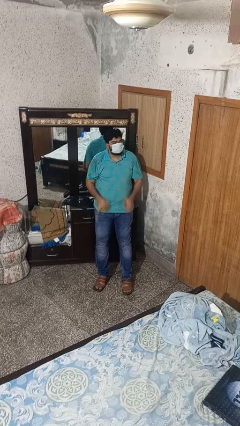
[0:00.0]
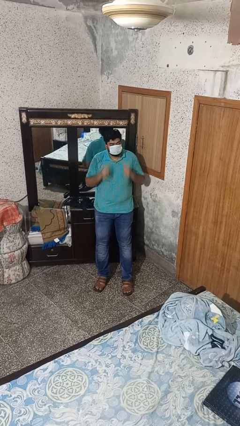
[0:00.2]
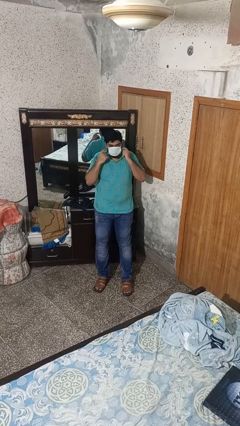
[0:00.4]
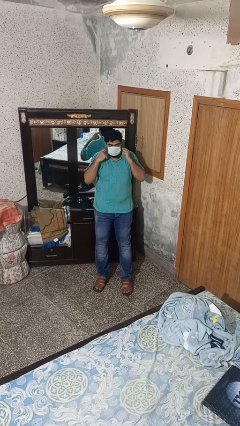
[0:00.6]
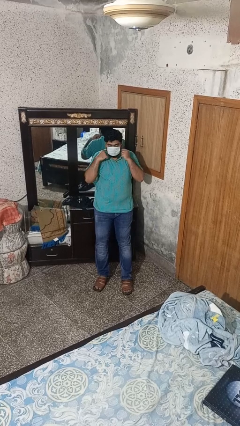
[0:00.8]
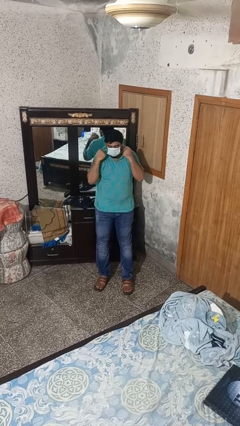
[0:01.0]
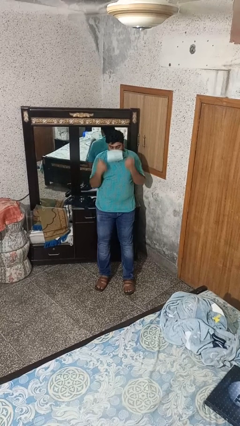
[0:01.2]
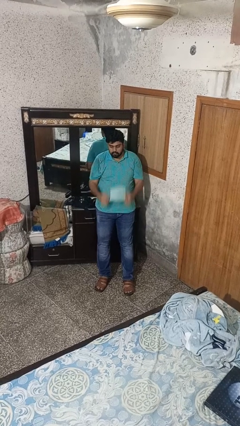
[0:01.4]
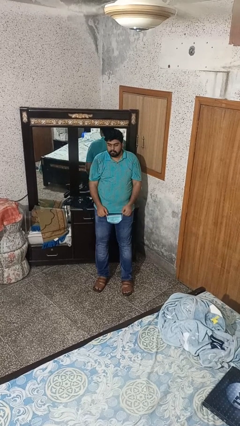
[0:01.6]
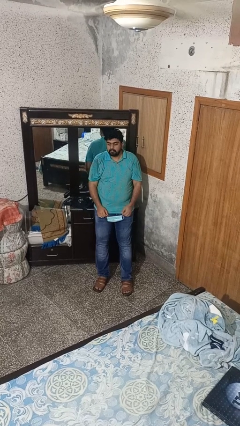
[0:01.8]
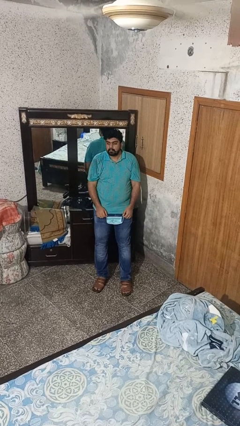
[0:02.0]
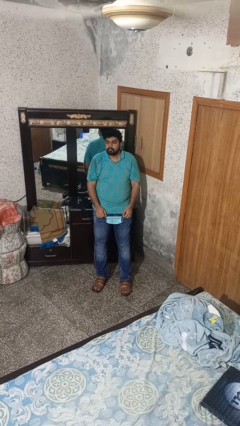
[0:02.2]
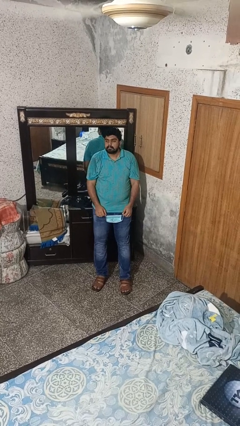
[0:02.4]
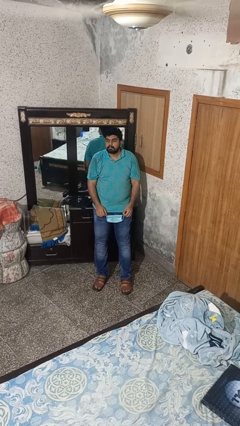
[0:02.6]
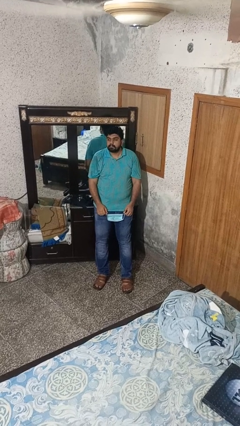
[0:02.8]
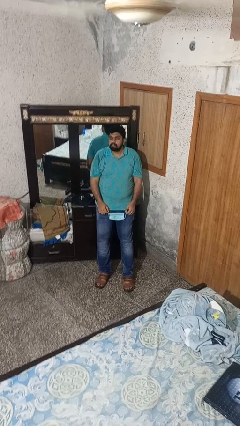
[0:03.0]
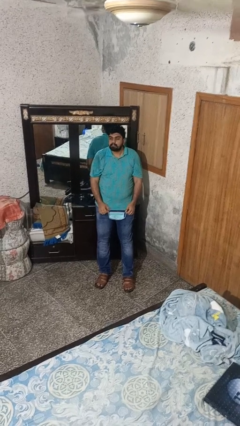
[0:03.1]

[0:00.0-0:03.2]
person takes off facemask

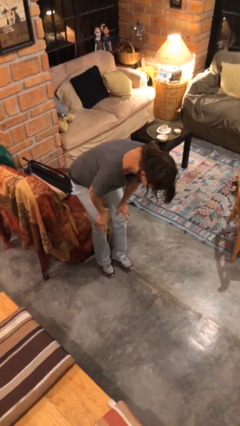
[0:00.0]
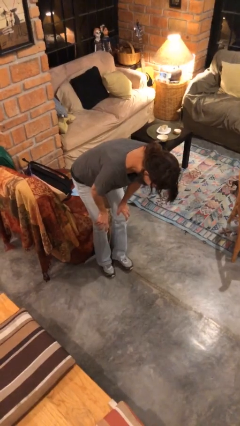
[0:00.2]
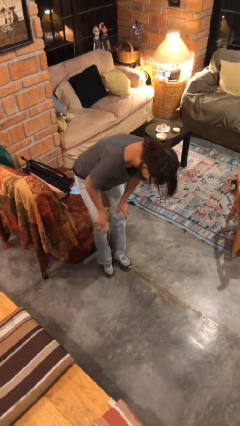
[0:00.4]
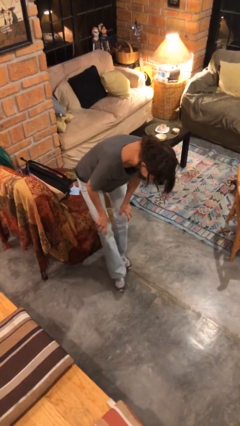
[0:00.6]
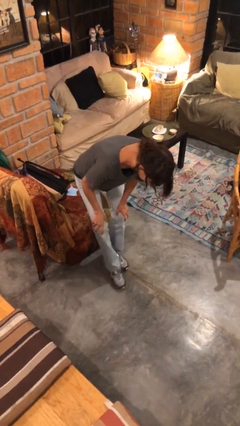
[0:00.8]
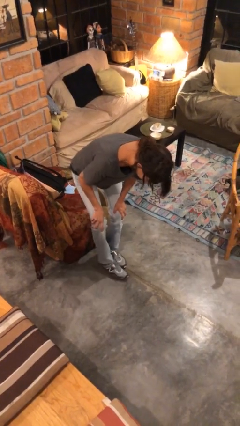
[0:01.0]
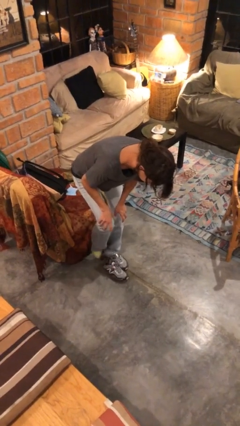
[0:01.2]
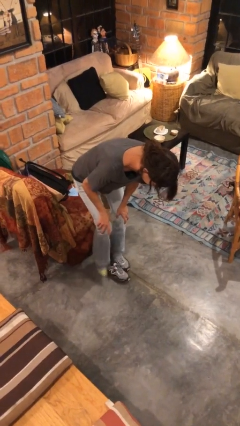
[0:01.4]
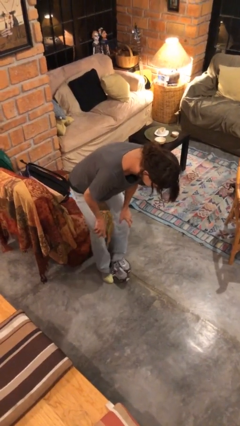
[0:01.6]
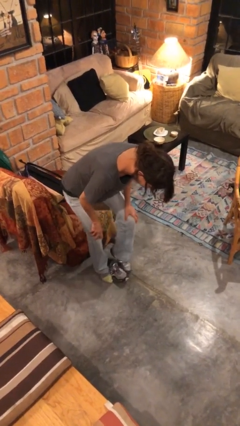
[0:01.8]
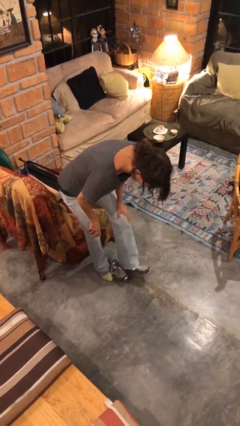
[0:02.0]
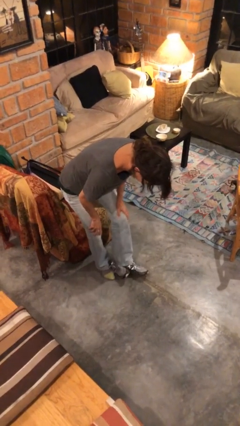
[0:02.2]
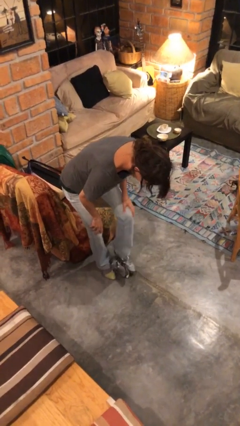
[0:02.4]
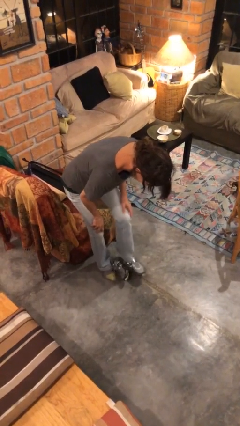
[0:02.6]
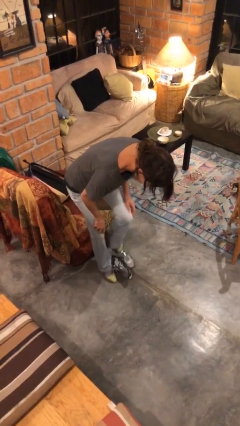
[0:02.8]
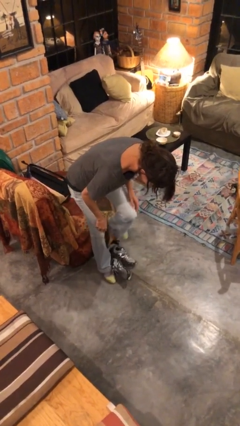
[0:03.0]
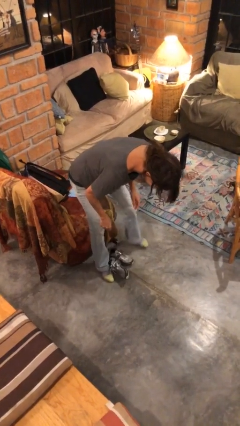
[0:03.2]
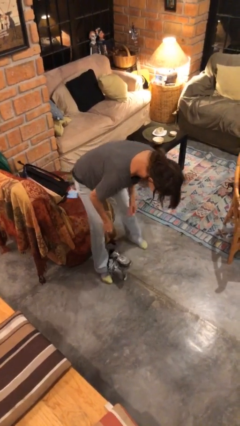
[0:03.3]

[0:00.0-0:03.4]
person takes off shoes

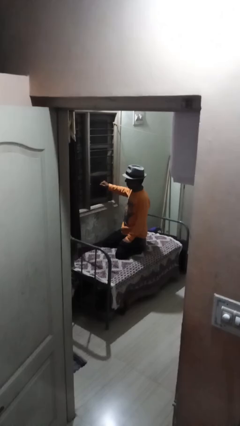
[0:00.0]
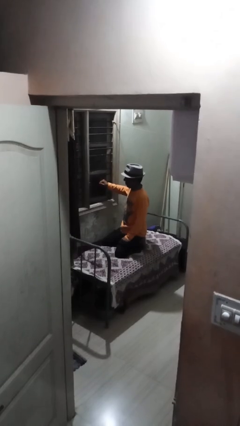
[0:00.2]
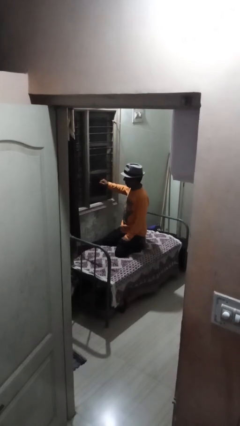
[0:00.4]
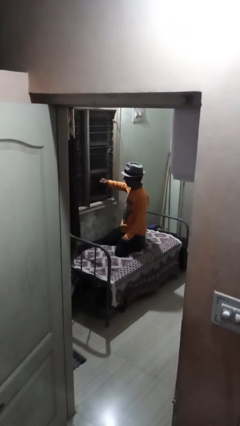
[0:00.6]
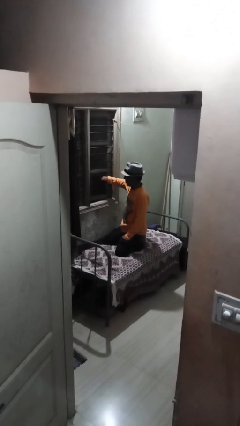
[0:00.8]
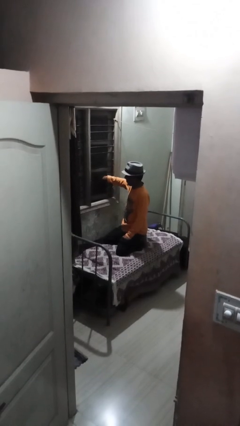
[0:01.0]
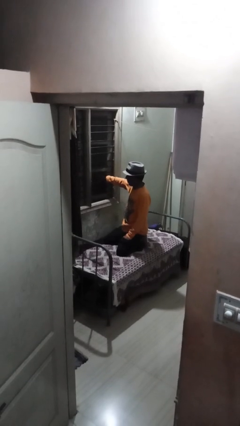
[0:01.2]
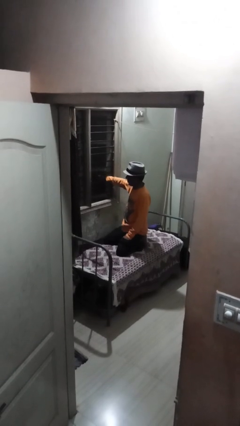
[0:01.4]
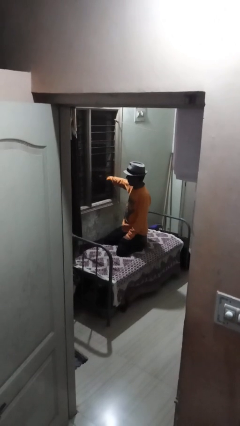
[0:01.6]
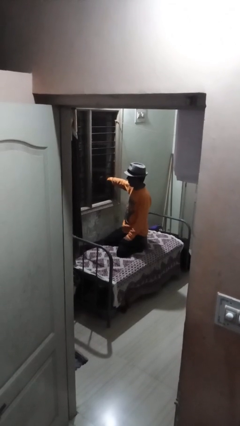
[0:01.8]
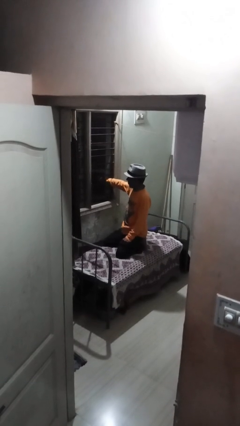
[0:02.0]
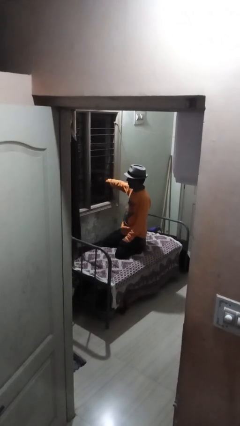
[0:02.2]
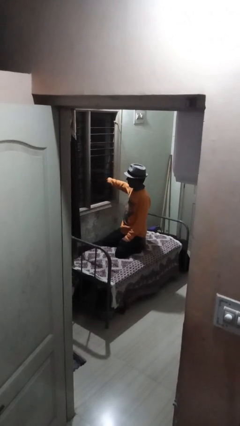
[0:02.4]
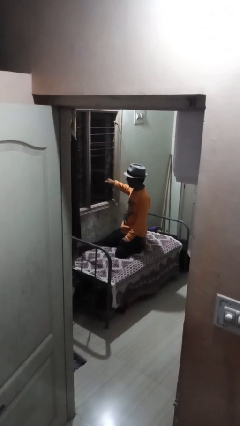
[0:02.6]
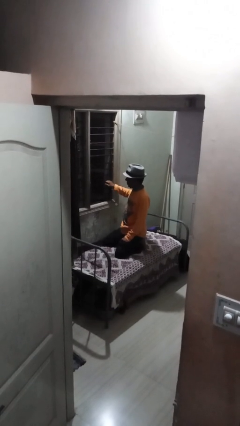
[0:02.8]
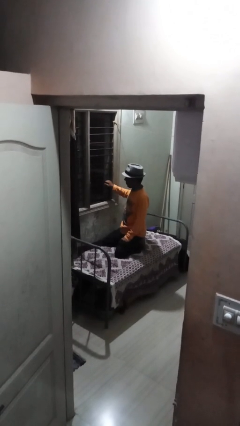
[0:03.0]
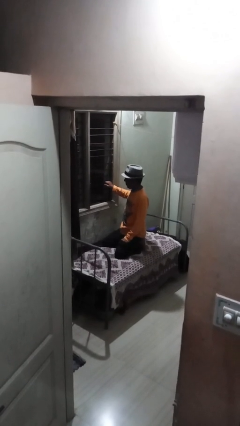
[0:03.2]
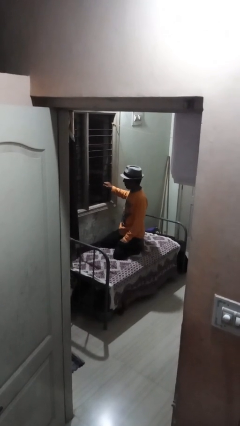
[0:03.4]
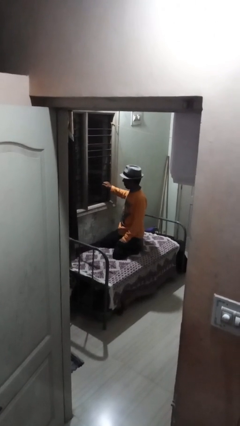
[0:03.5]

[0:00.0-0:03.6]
person opens home window

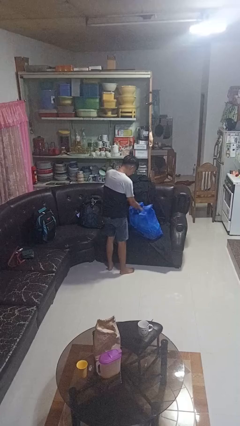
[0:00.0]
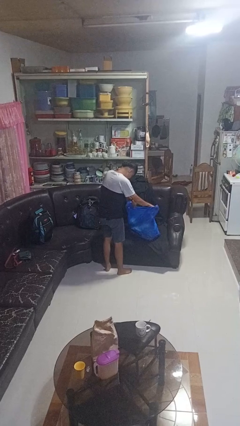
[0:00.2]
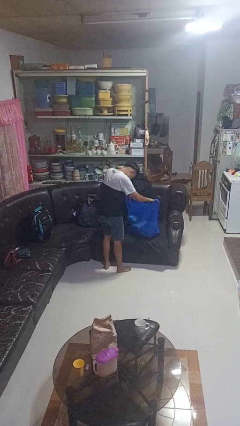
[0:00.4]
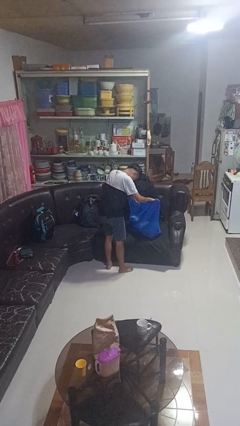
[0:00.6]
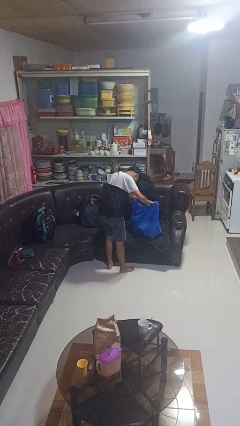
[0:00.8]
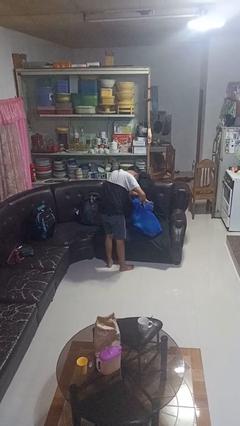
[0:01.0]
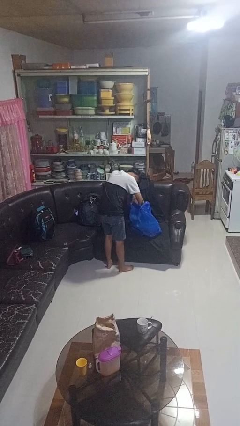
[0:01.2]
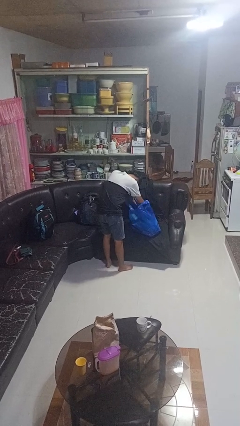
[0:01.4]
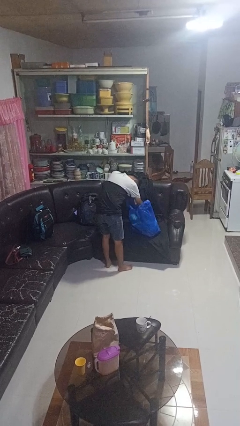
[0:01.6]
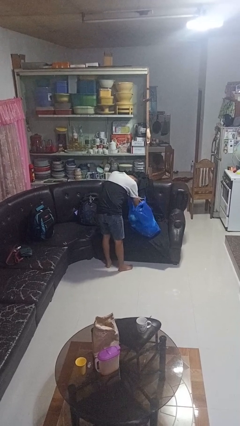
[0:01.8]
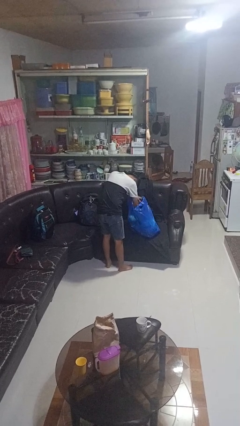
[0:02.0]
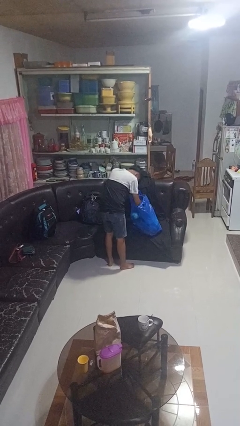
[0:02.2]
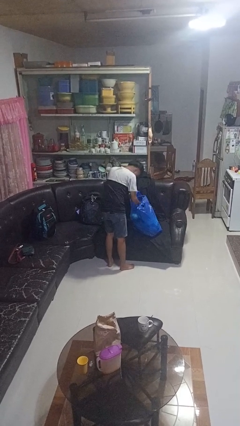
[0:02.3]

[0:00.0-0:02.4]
person searches in bag

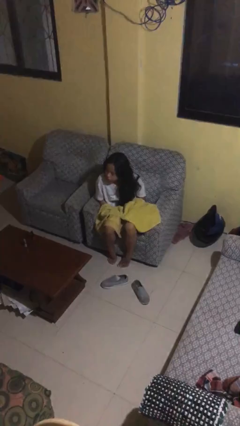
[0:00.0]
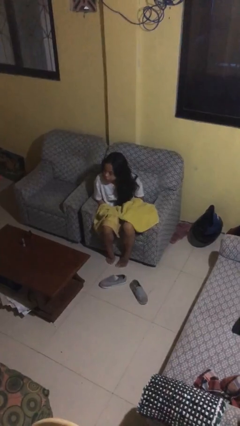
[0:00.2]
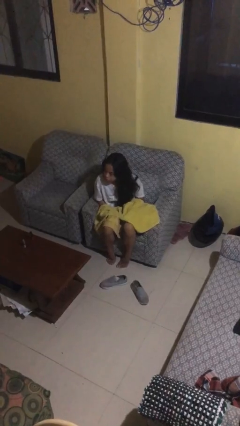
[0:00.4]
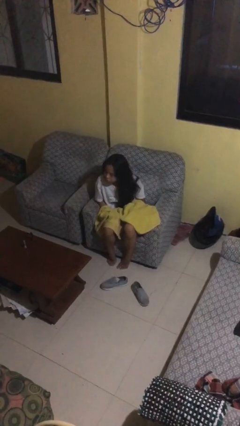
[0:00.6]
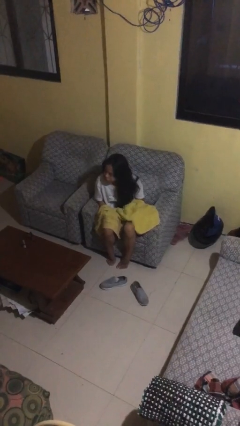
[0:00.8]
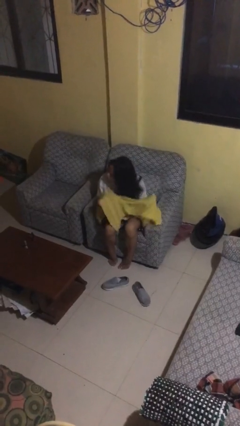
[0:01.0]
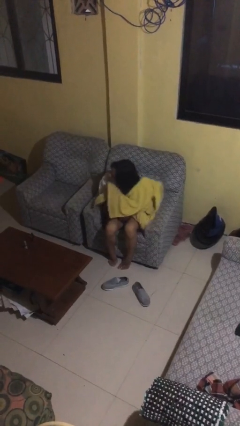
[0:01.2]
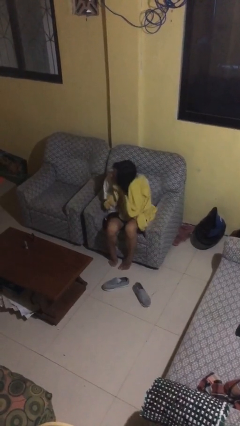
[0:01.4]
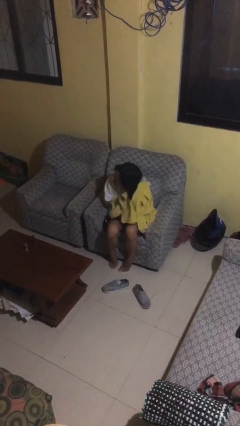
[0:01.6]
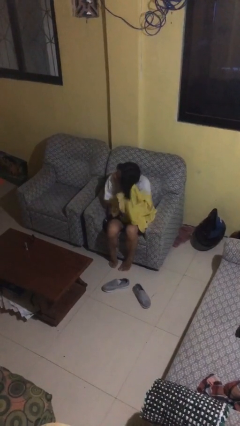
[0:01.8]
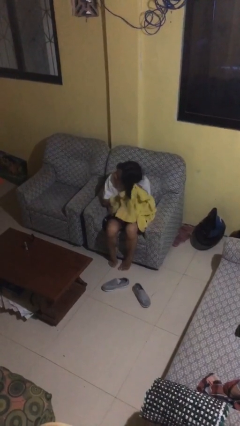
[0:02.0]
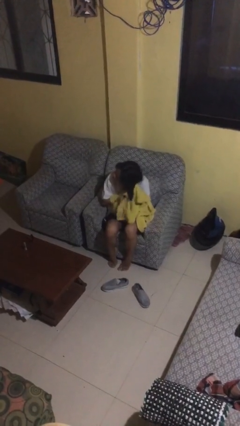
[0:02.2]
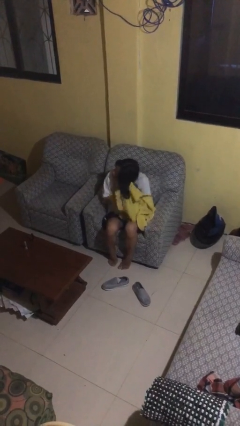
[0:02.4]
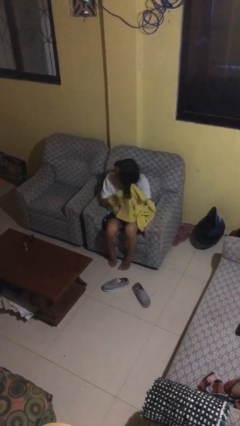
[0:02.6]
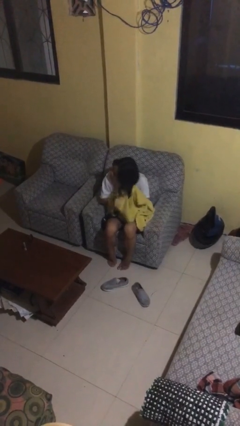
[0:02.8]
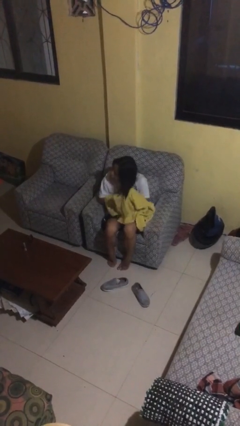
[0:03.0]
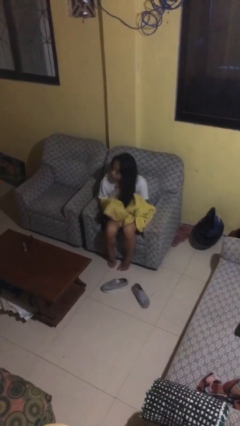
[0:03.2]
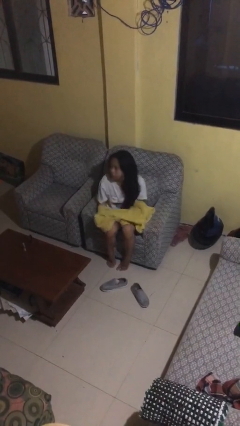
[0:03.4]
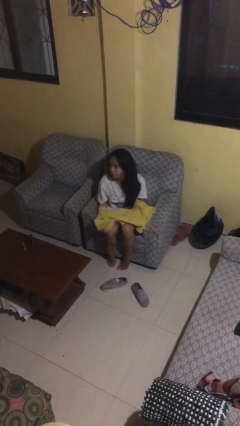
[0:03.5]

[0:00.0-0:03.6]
person dries hair with towel

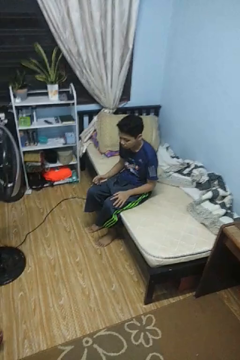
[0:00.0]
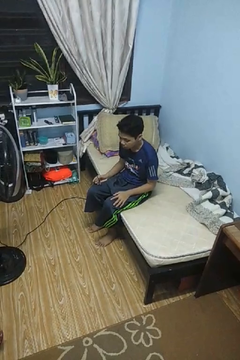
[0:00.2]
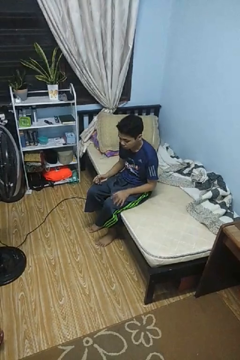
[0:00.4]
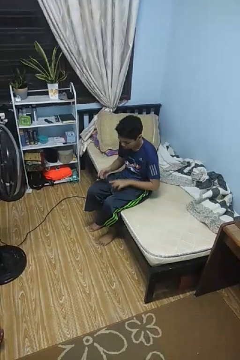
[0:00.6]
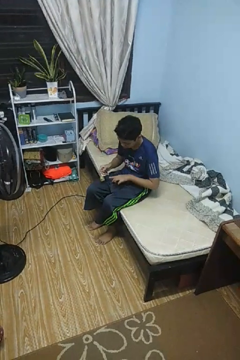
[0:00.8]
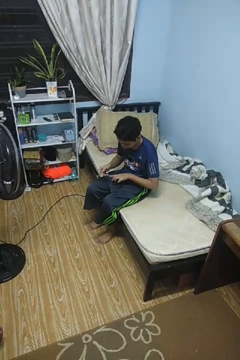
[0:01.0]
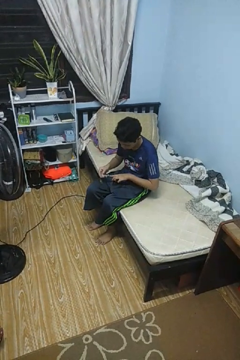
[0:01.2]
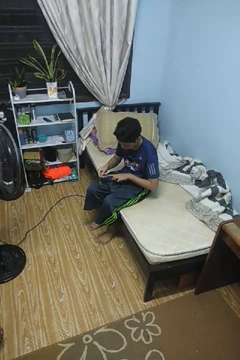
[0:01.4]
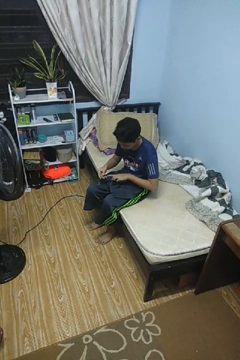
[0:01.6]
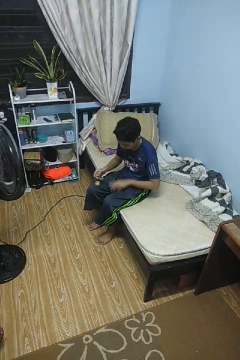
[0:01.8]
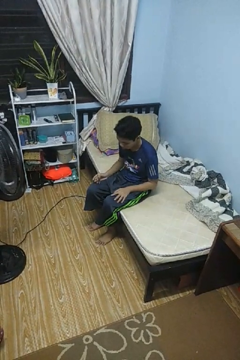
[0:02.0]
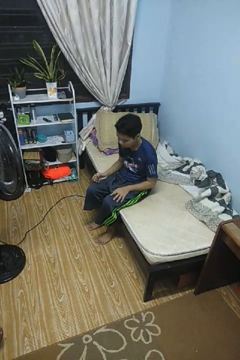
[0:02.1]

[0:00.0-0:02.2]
person clips fingernails
